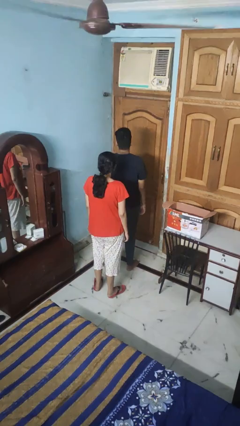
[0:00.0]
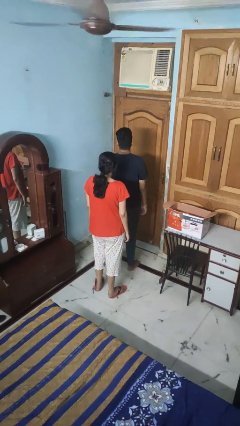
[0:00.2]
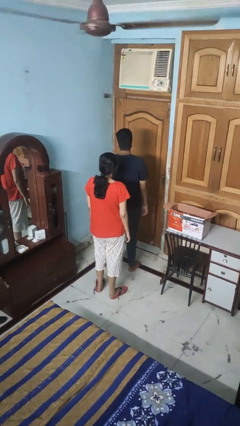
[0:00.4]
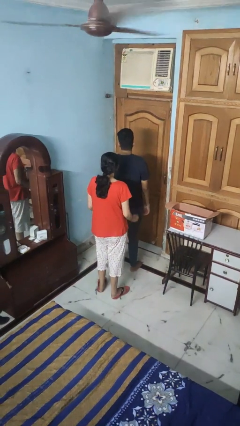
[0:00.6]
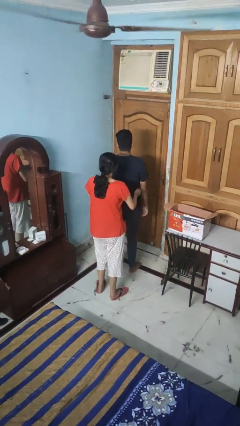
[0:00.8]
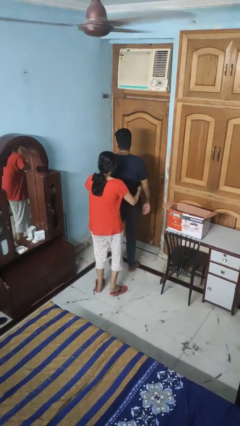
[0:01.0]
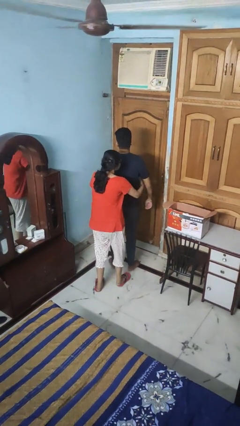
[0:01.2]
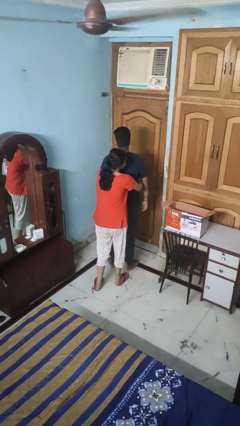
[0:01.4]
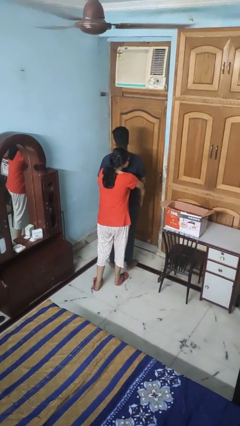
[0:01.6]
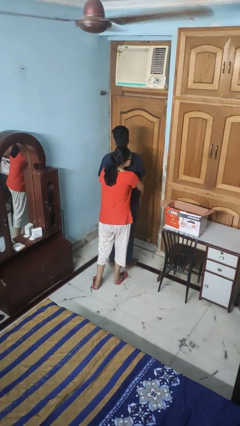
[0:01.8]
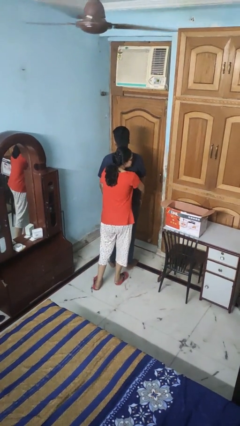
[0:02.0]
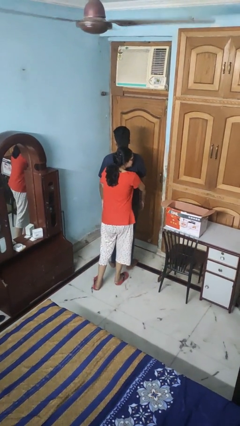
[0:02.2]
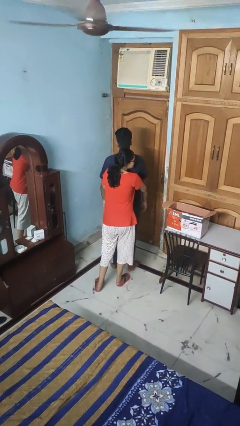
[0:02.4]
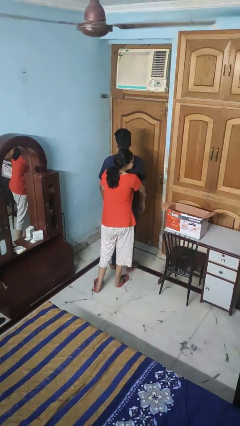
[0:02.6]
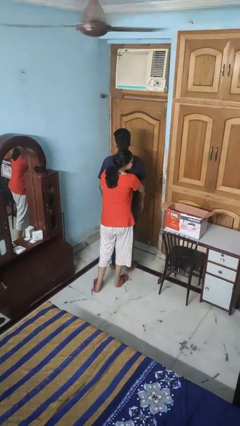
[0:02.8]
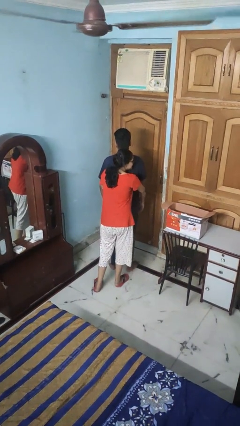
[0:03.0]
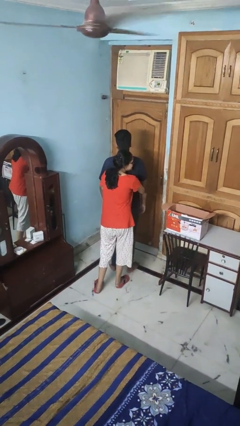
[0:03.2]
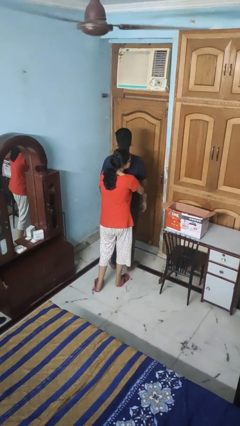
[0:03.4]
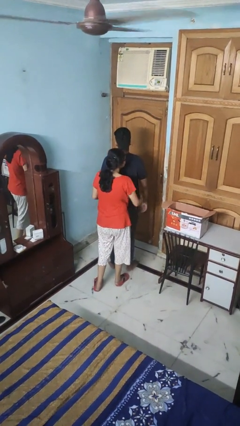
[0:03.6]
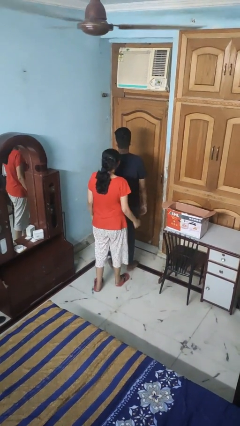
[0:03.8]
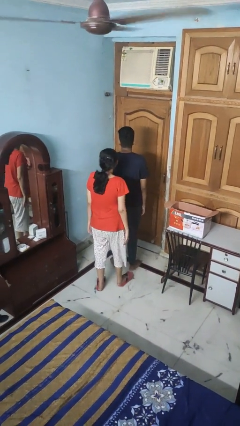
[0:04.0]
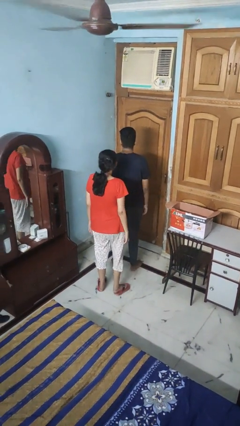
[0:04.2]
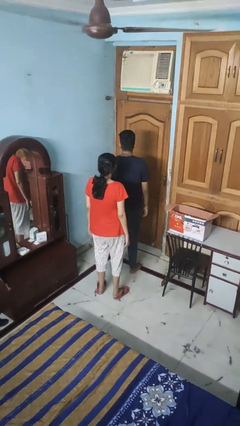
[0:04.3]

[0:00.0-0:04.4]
person hugs person from behind

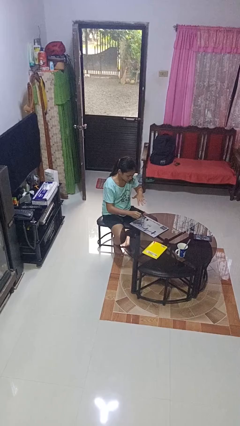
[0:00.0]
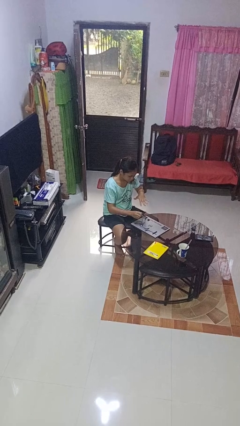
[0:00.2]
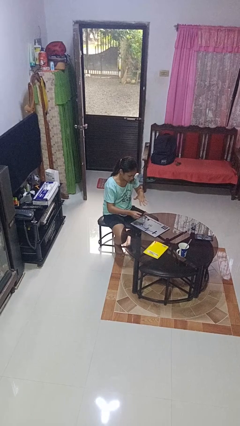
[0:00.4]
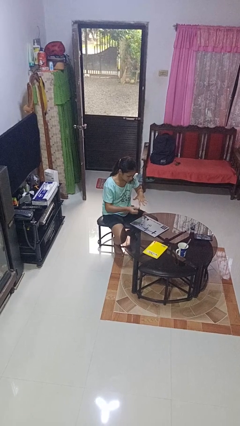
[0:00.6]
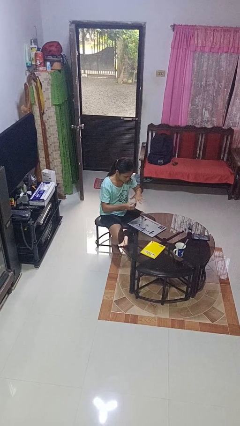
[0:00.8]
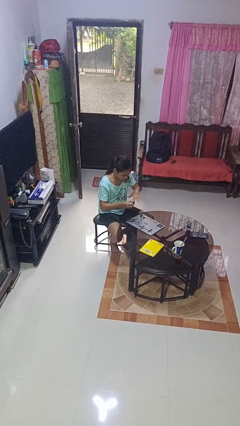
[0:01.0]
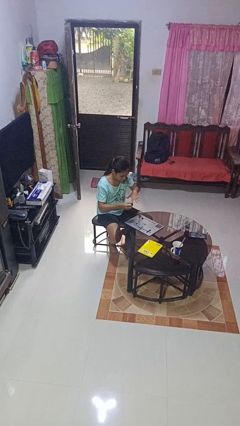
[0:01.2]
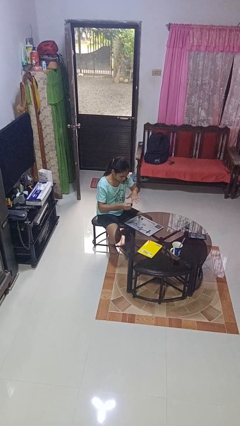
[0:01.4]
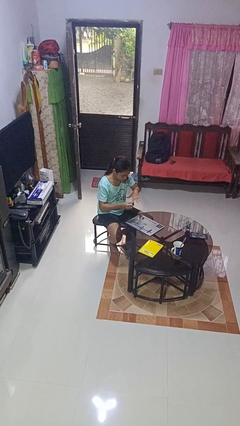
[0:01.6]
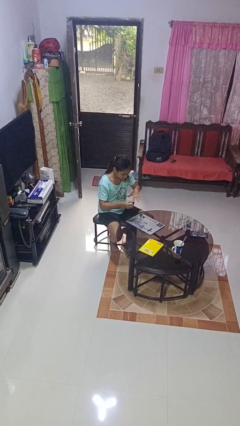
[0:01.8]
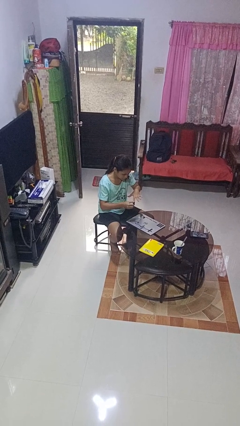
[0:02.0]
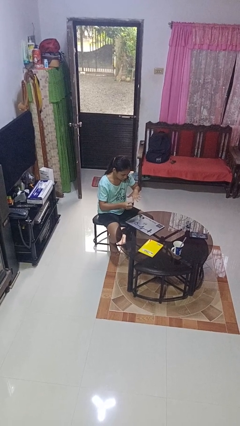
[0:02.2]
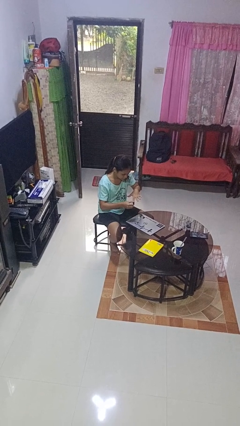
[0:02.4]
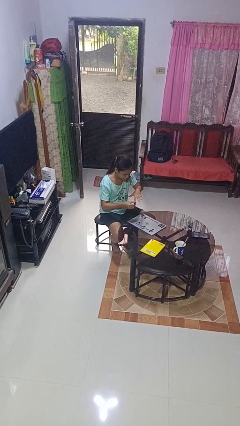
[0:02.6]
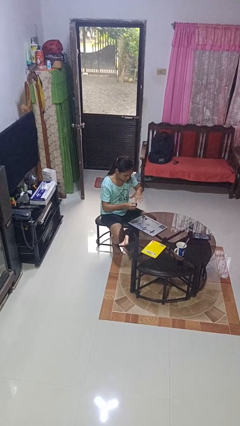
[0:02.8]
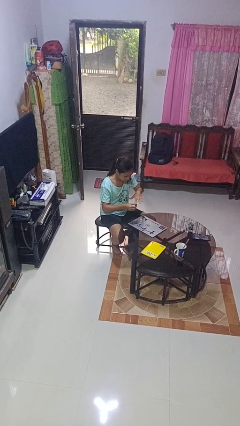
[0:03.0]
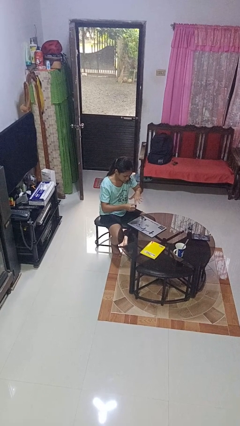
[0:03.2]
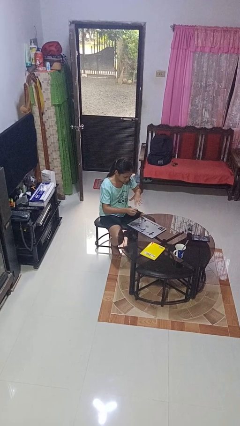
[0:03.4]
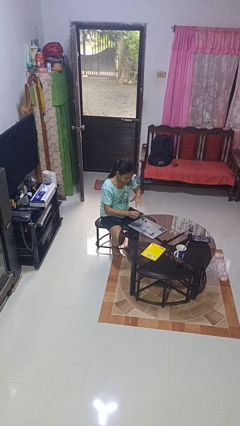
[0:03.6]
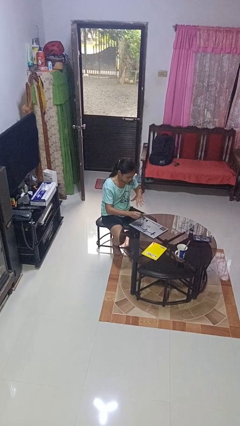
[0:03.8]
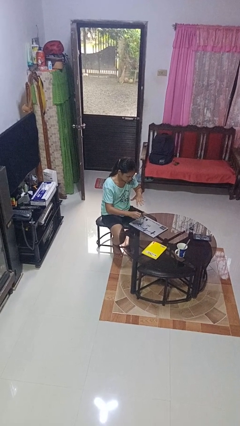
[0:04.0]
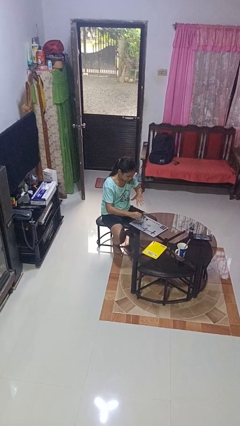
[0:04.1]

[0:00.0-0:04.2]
person paints fingernails

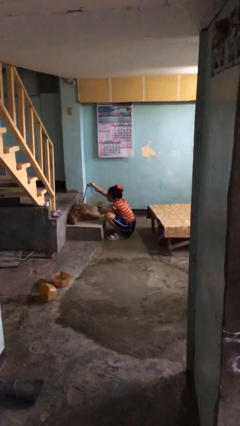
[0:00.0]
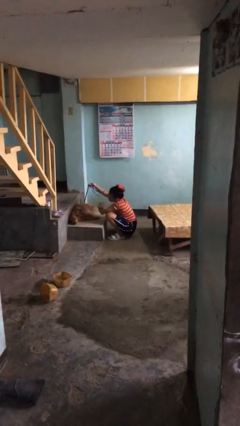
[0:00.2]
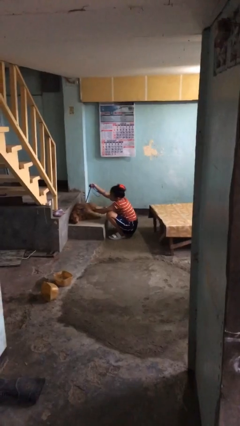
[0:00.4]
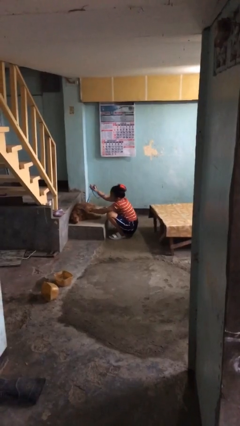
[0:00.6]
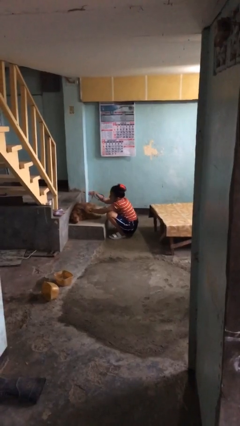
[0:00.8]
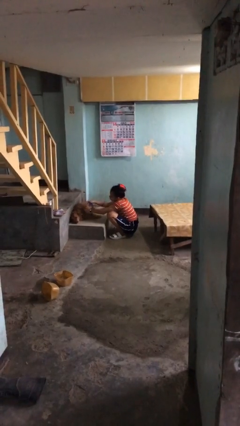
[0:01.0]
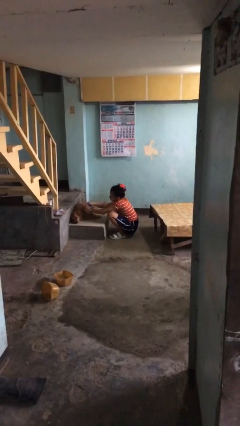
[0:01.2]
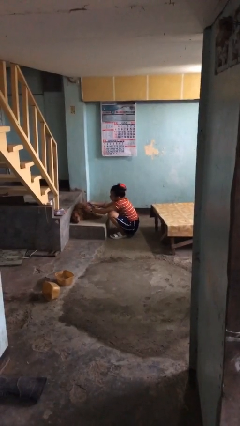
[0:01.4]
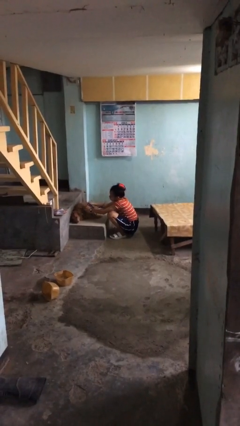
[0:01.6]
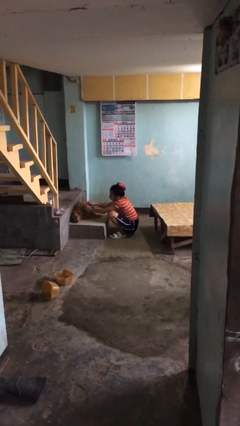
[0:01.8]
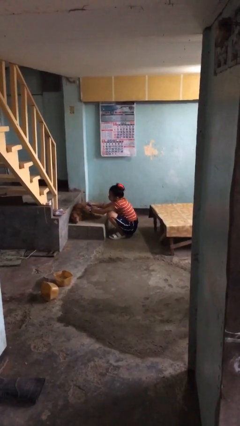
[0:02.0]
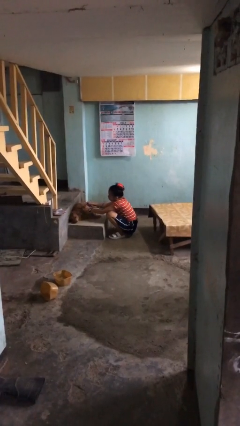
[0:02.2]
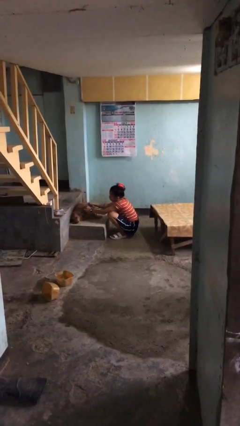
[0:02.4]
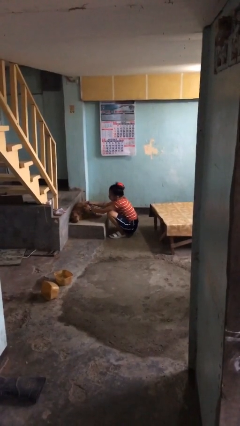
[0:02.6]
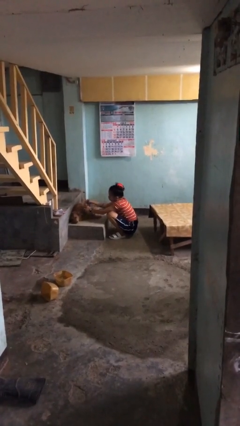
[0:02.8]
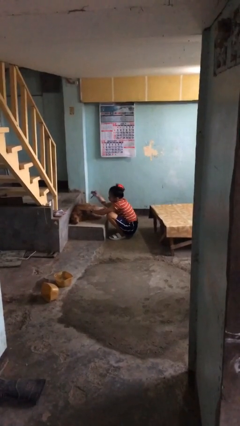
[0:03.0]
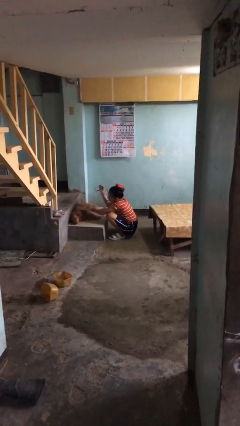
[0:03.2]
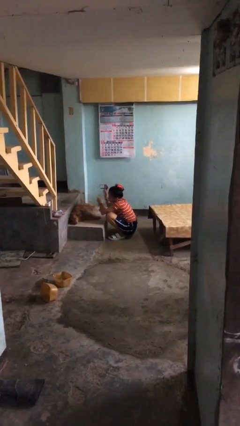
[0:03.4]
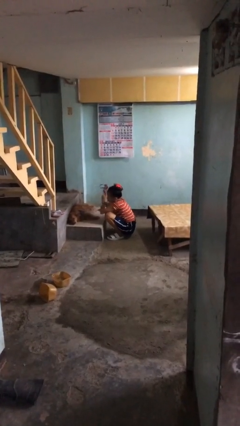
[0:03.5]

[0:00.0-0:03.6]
person unattaches leash from dog

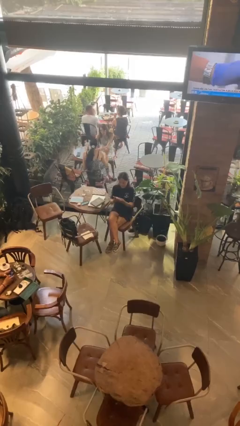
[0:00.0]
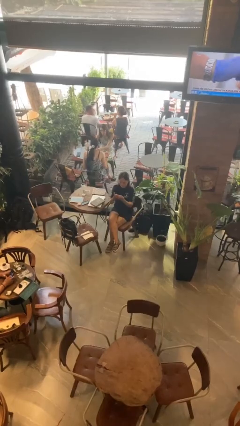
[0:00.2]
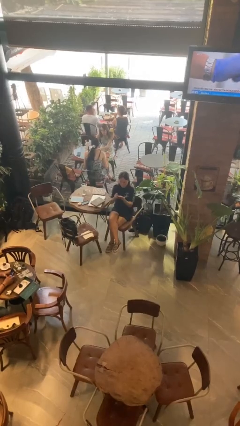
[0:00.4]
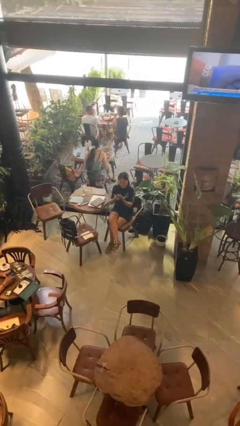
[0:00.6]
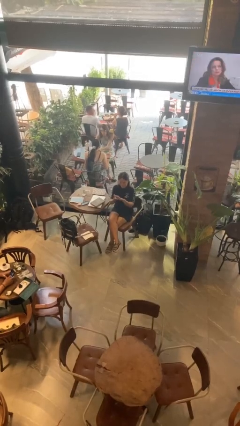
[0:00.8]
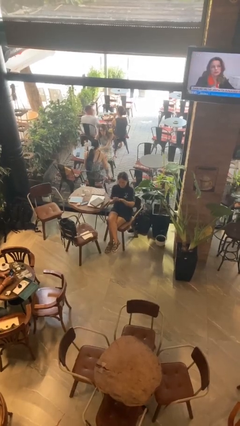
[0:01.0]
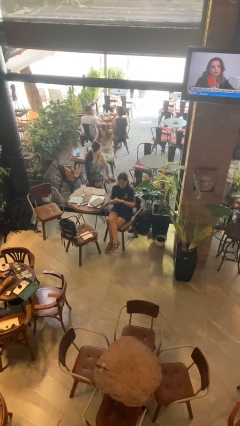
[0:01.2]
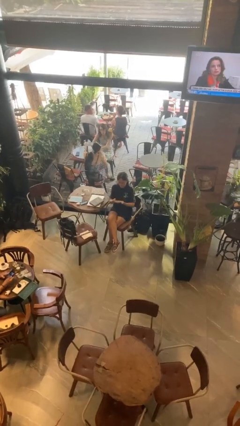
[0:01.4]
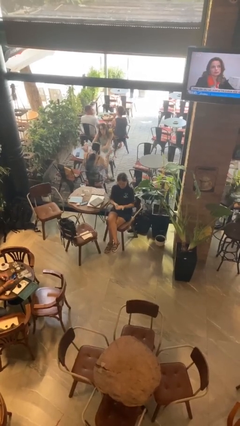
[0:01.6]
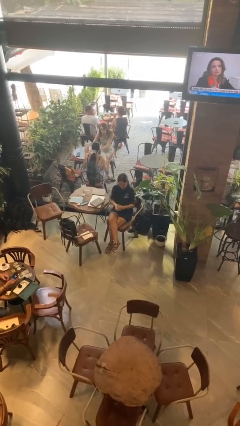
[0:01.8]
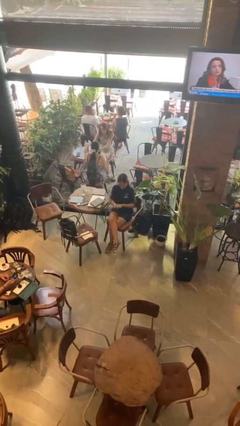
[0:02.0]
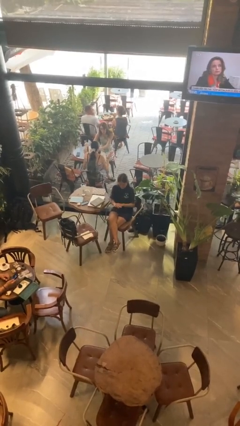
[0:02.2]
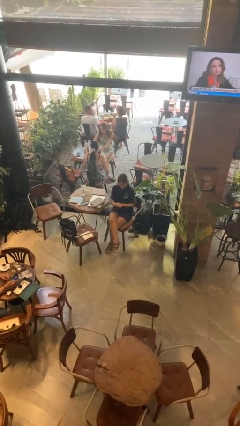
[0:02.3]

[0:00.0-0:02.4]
person looks at hands in lap

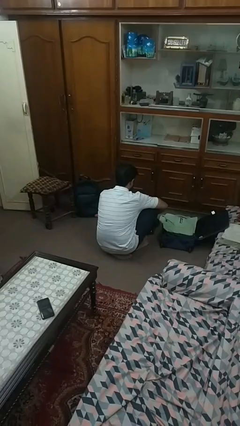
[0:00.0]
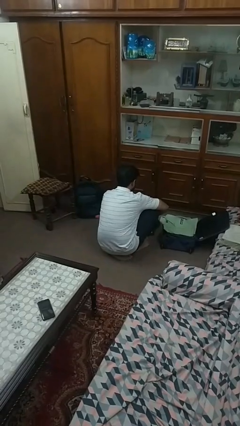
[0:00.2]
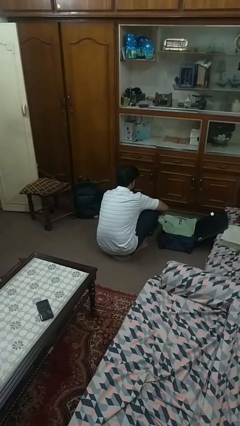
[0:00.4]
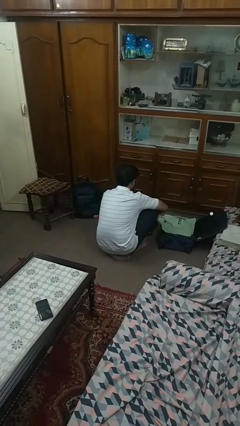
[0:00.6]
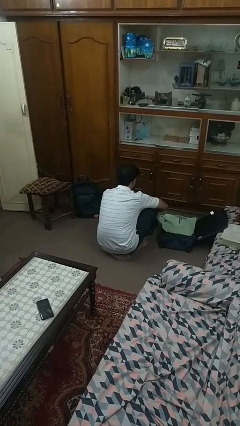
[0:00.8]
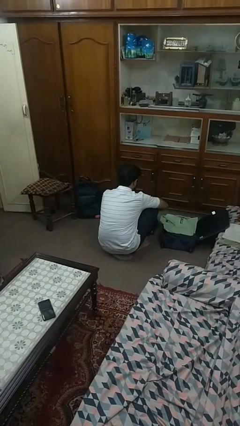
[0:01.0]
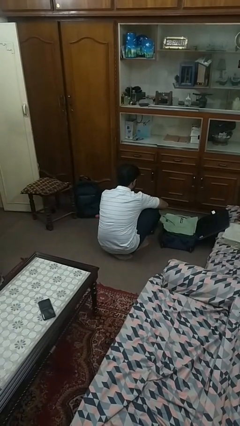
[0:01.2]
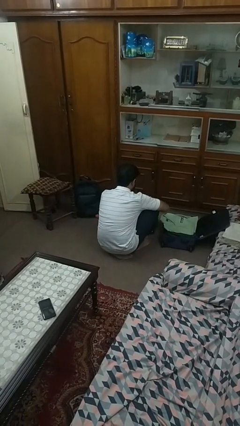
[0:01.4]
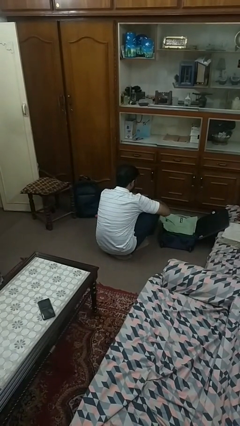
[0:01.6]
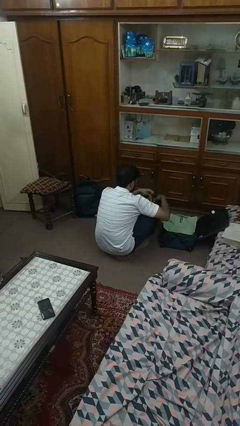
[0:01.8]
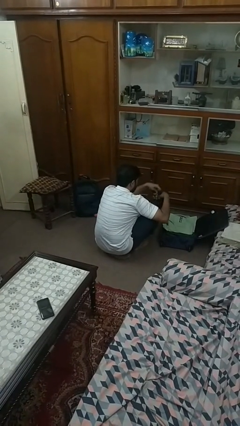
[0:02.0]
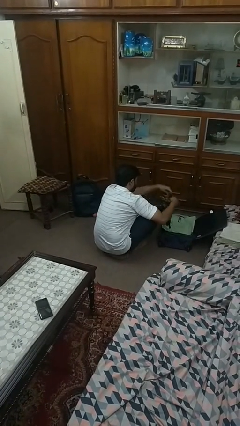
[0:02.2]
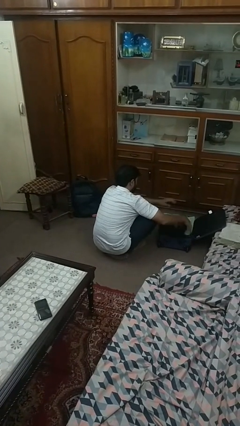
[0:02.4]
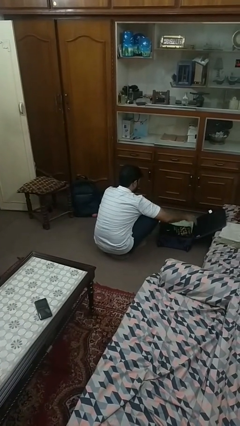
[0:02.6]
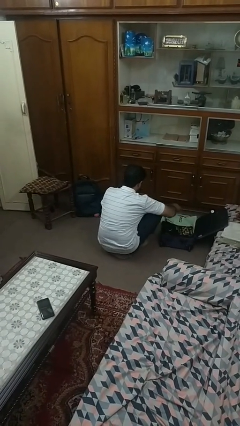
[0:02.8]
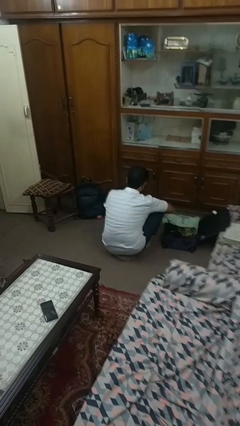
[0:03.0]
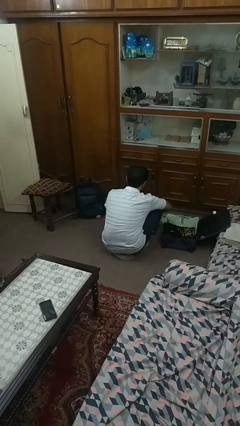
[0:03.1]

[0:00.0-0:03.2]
person loads clothes into suitcase
